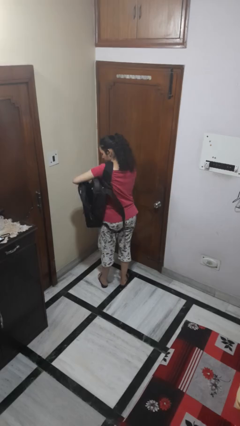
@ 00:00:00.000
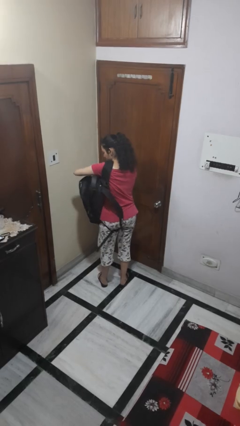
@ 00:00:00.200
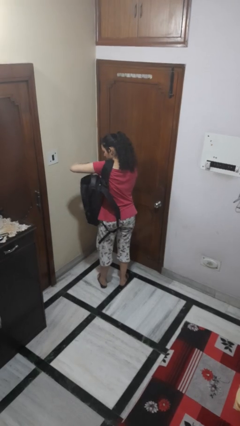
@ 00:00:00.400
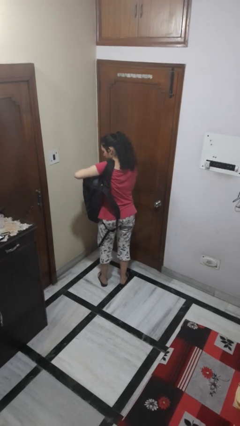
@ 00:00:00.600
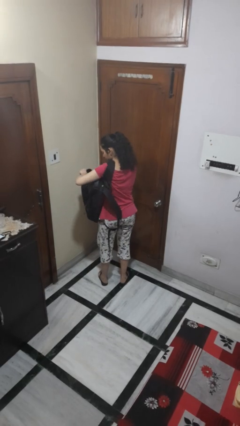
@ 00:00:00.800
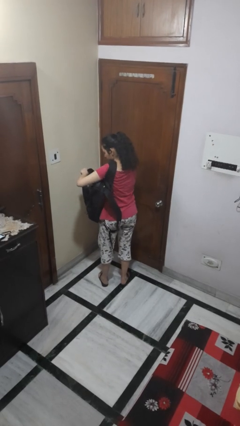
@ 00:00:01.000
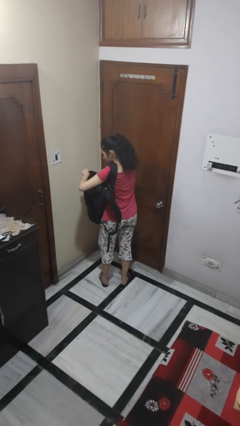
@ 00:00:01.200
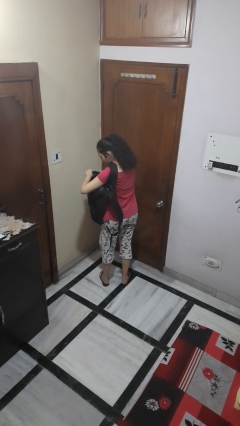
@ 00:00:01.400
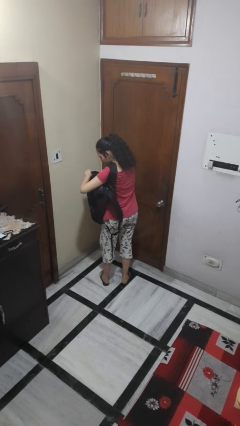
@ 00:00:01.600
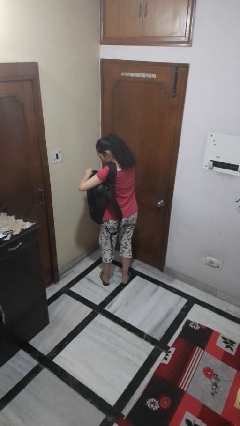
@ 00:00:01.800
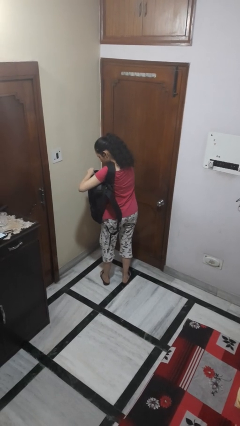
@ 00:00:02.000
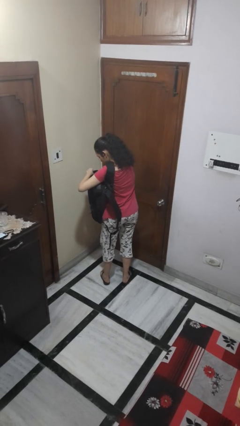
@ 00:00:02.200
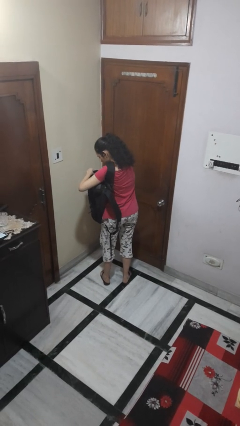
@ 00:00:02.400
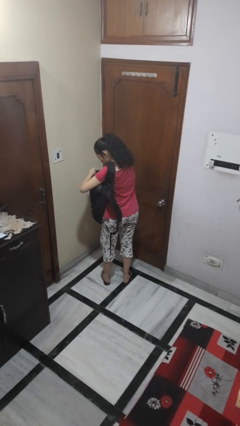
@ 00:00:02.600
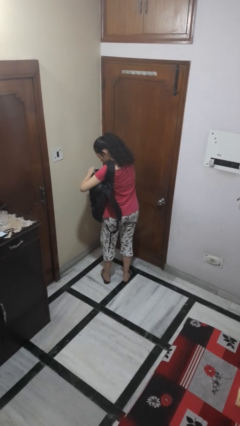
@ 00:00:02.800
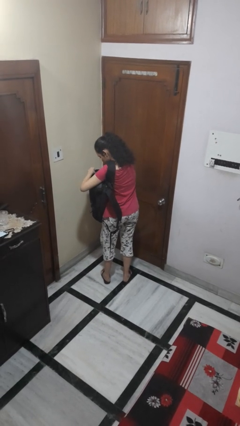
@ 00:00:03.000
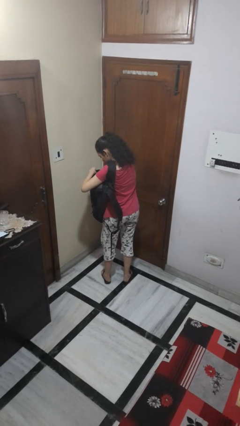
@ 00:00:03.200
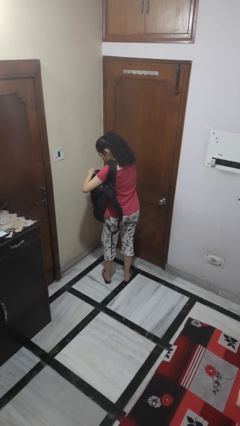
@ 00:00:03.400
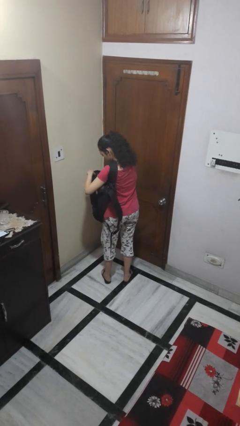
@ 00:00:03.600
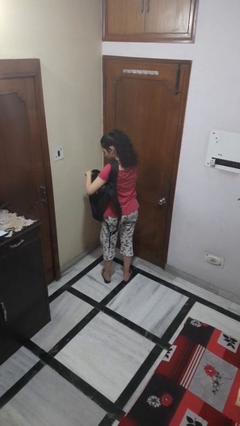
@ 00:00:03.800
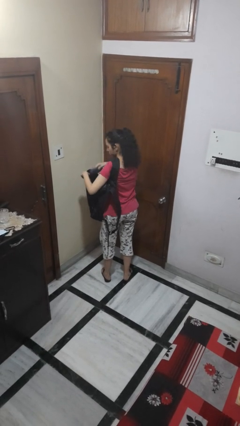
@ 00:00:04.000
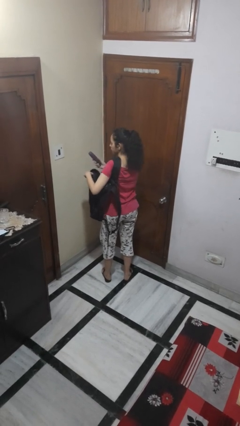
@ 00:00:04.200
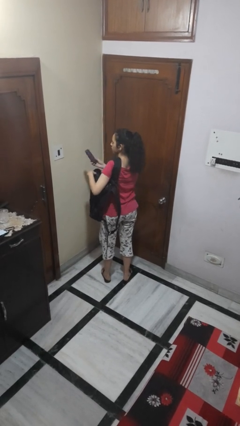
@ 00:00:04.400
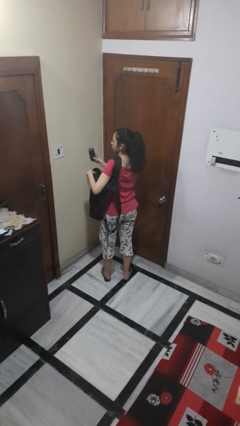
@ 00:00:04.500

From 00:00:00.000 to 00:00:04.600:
person searches in backpack

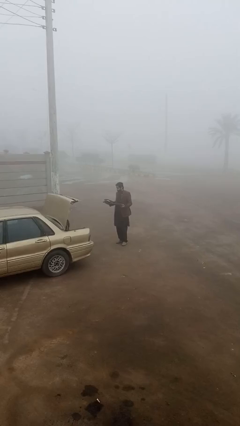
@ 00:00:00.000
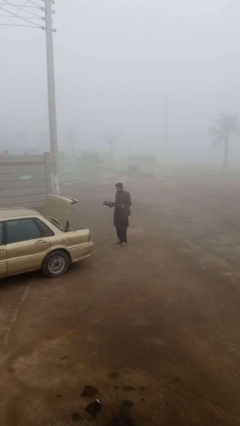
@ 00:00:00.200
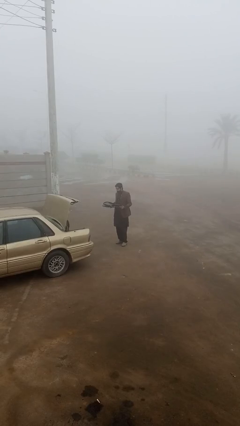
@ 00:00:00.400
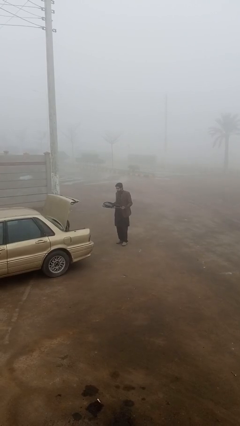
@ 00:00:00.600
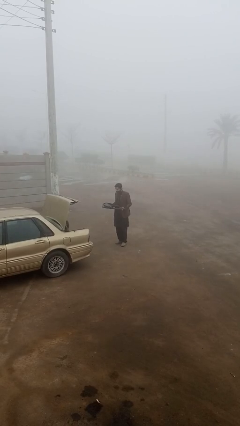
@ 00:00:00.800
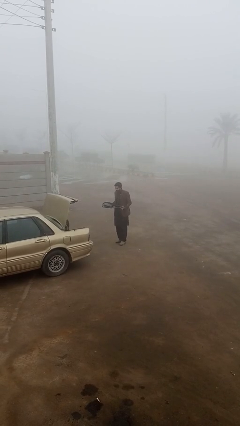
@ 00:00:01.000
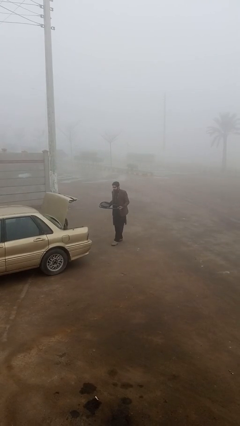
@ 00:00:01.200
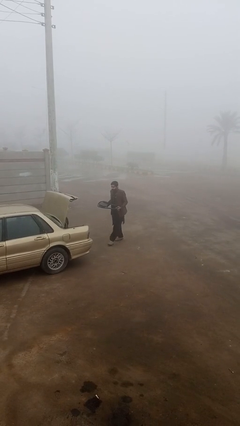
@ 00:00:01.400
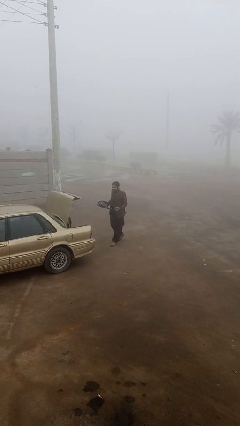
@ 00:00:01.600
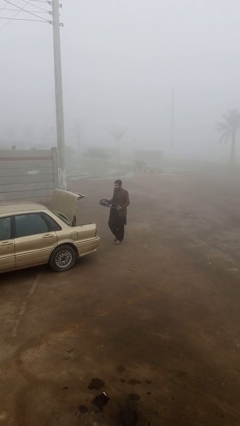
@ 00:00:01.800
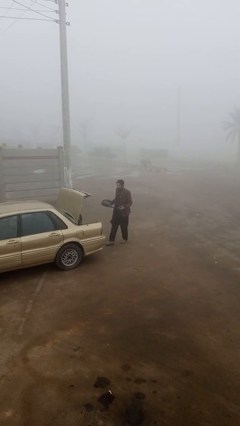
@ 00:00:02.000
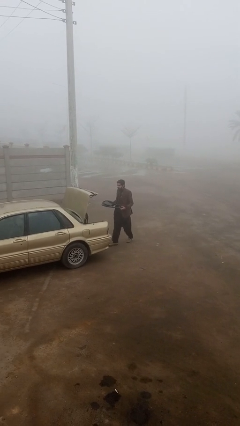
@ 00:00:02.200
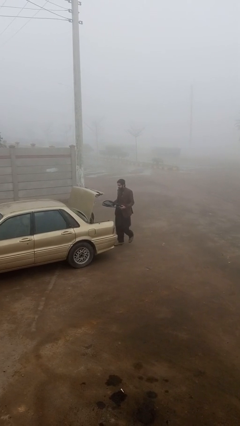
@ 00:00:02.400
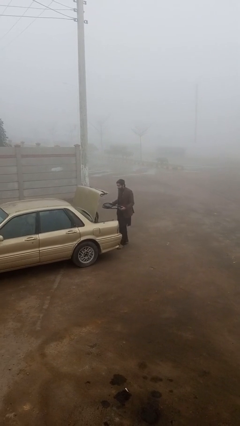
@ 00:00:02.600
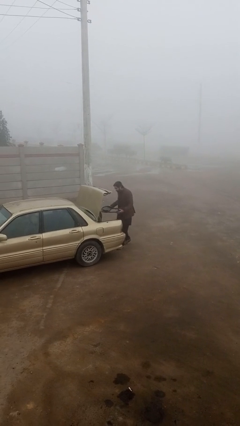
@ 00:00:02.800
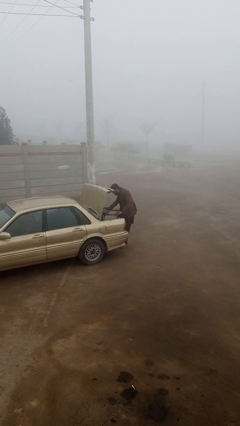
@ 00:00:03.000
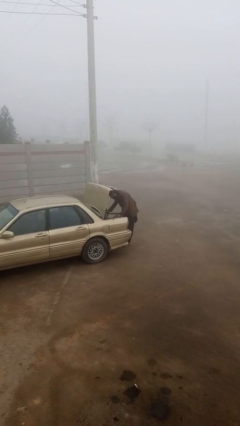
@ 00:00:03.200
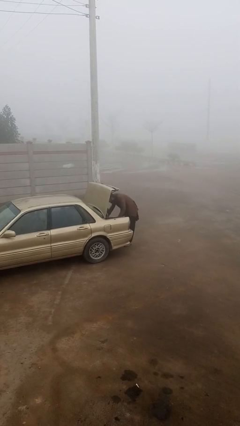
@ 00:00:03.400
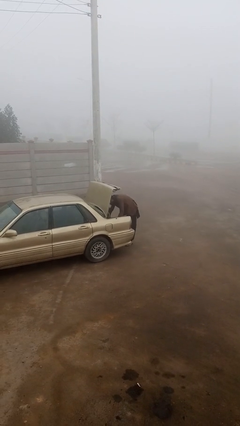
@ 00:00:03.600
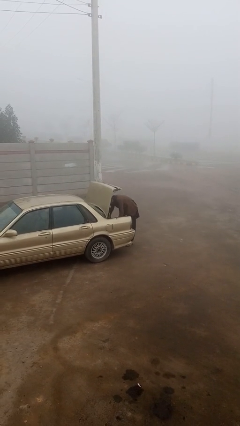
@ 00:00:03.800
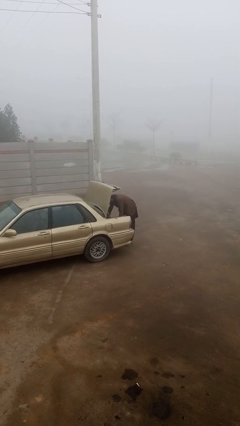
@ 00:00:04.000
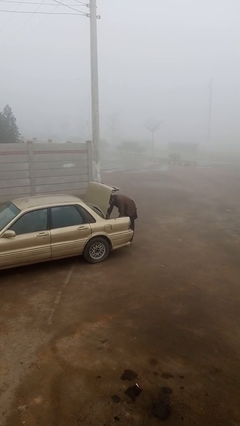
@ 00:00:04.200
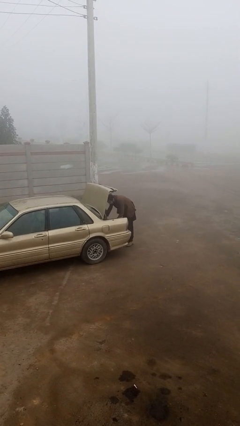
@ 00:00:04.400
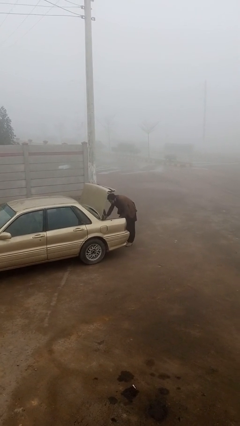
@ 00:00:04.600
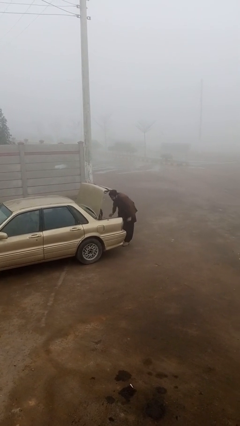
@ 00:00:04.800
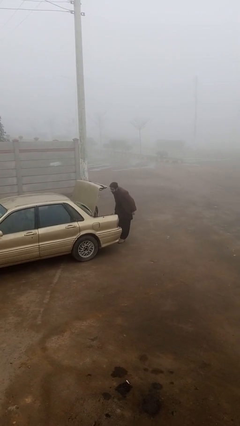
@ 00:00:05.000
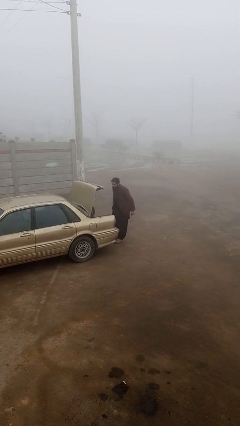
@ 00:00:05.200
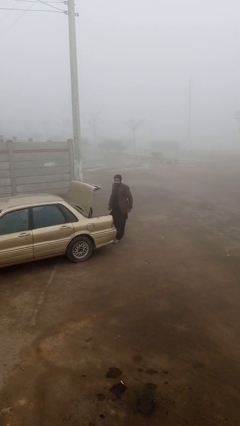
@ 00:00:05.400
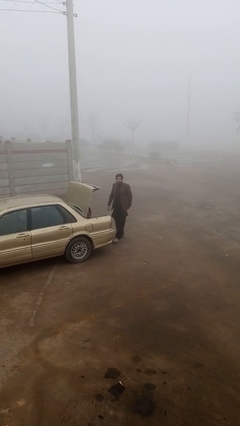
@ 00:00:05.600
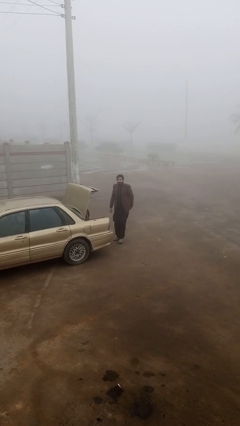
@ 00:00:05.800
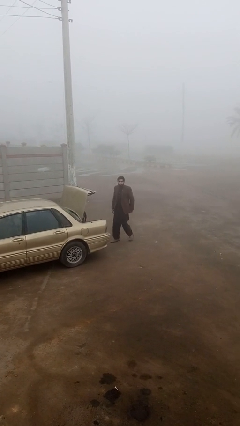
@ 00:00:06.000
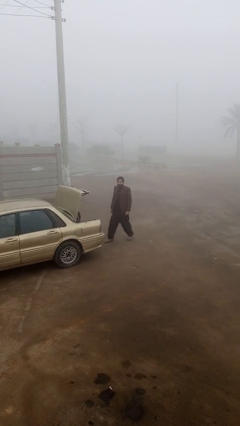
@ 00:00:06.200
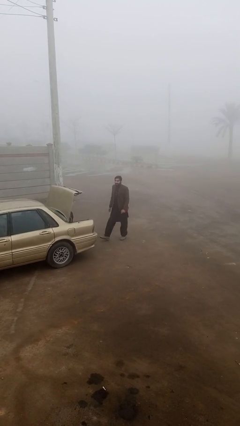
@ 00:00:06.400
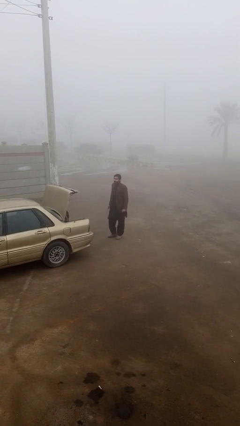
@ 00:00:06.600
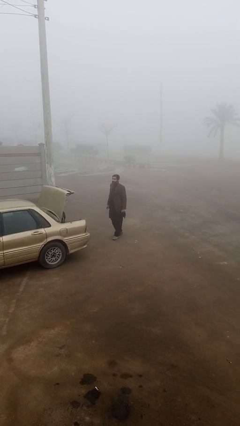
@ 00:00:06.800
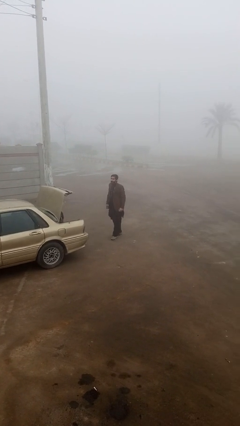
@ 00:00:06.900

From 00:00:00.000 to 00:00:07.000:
person loads car

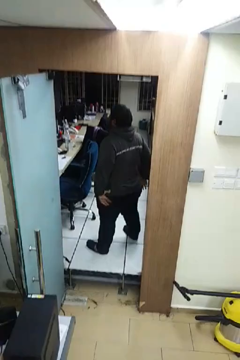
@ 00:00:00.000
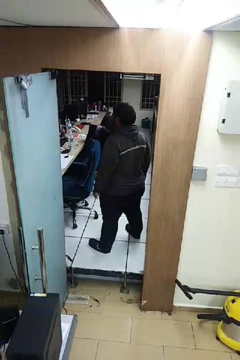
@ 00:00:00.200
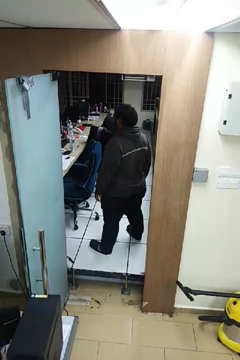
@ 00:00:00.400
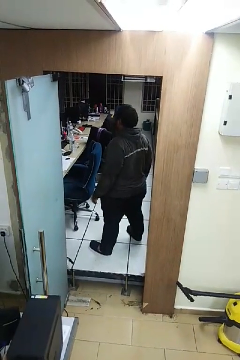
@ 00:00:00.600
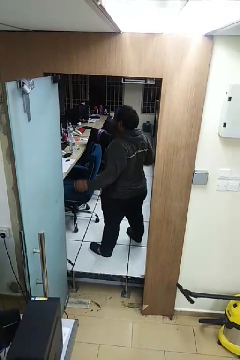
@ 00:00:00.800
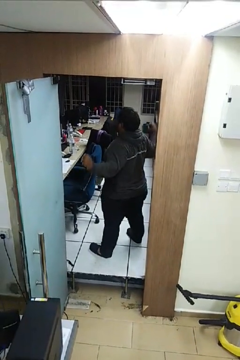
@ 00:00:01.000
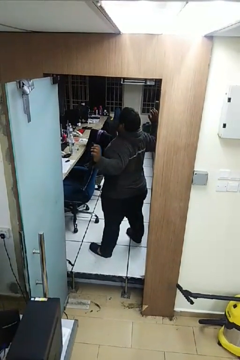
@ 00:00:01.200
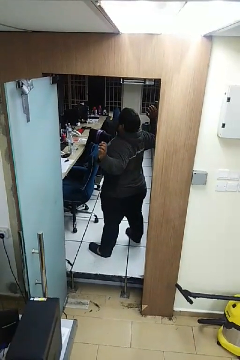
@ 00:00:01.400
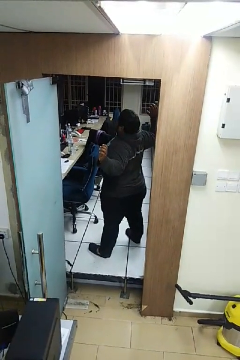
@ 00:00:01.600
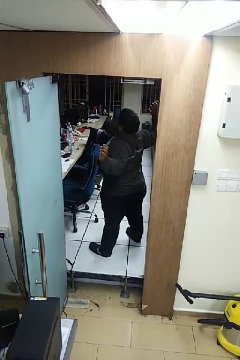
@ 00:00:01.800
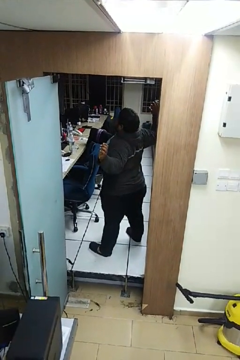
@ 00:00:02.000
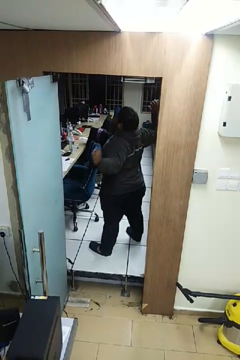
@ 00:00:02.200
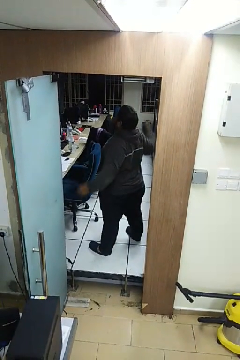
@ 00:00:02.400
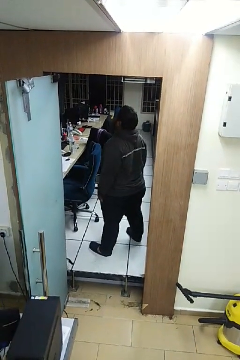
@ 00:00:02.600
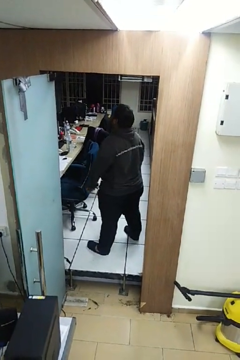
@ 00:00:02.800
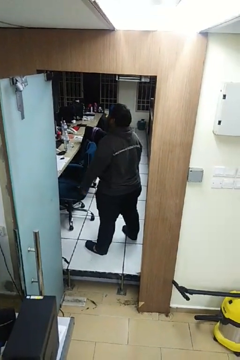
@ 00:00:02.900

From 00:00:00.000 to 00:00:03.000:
person stretches arms to side

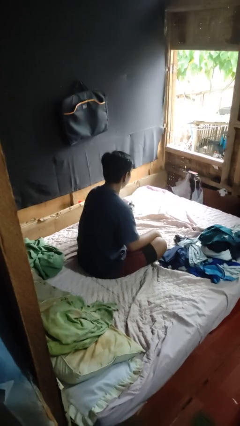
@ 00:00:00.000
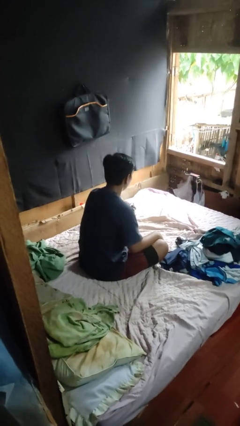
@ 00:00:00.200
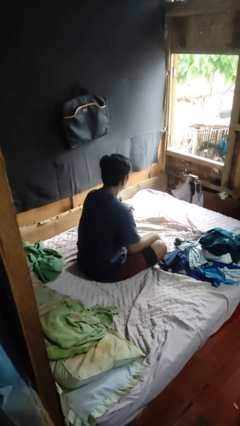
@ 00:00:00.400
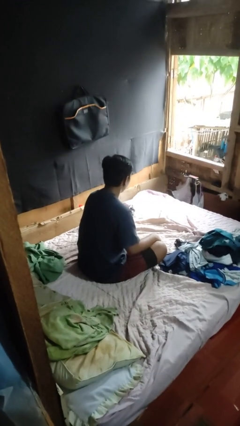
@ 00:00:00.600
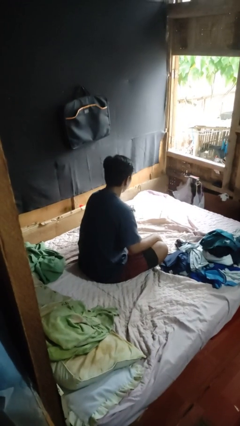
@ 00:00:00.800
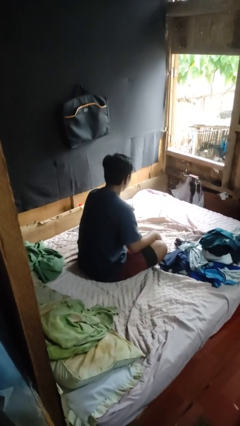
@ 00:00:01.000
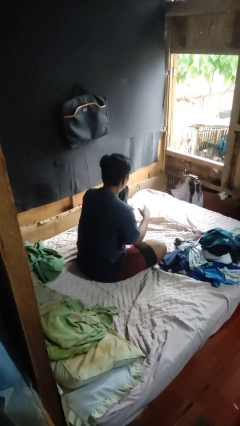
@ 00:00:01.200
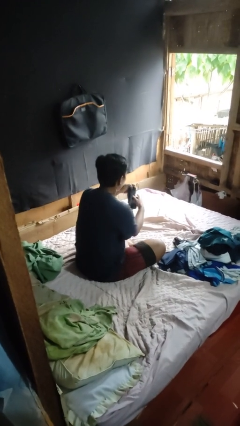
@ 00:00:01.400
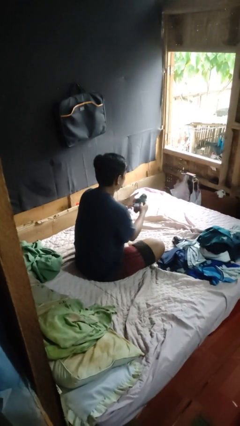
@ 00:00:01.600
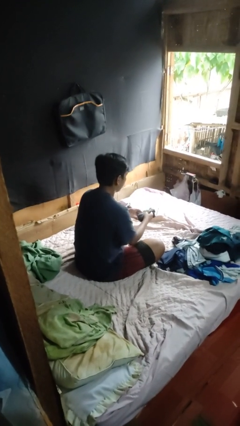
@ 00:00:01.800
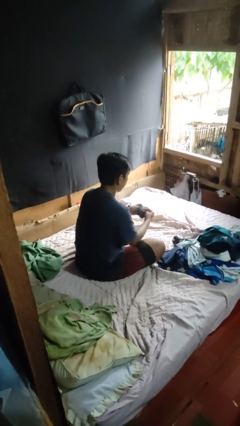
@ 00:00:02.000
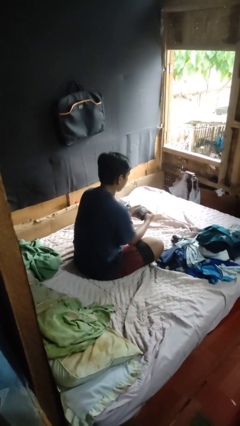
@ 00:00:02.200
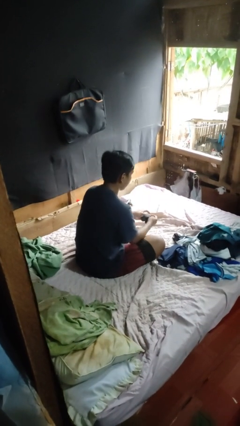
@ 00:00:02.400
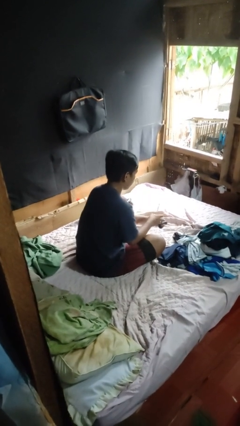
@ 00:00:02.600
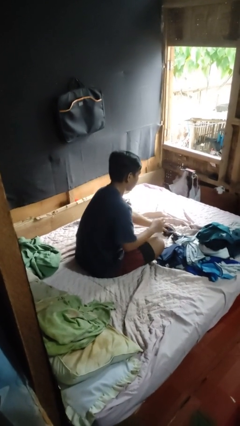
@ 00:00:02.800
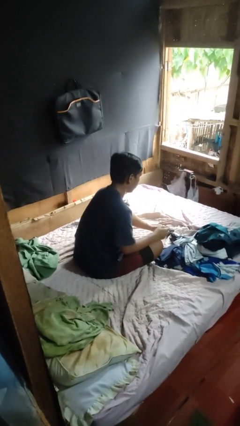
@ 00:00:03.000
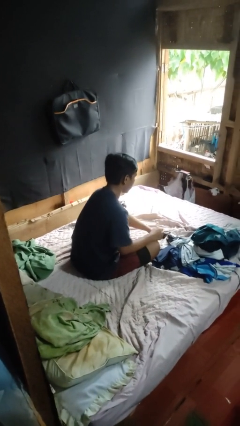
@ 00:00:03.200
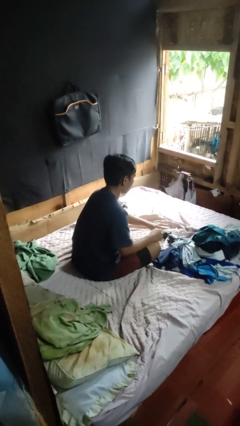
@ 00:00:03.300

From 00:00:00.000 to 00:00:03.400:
person folds socks

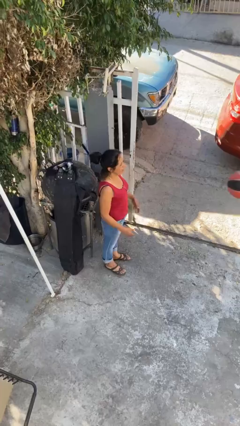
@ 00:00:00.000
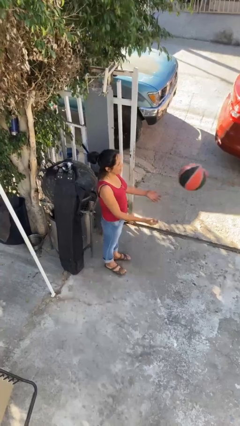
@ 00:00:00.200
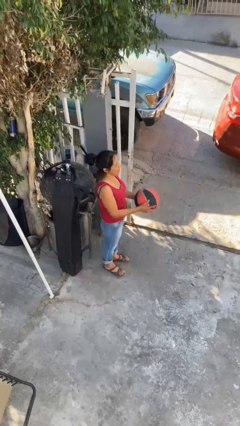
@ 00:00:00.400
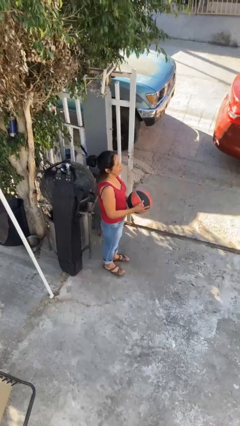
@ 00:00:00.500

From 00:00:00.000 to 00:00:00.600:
person catches object from person
